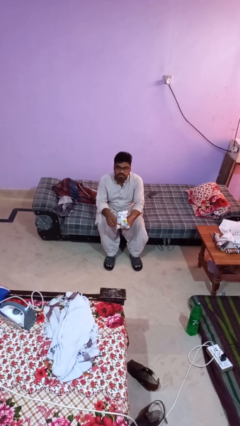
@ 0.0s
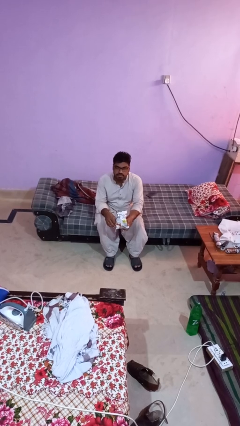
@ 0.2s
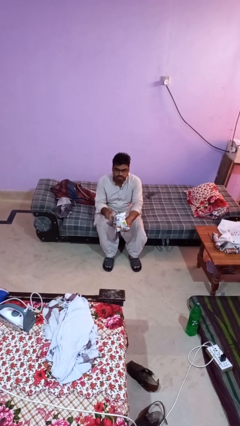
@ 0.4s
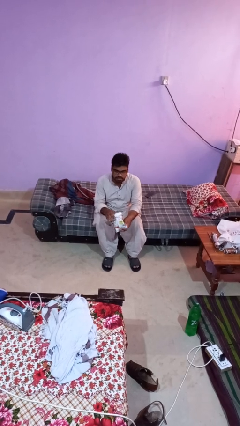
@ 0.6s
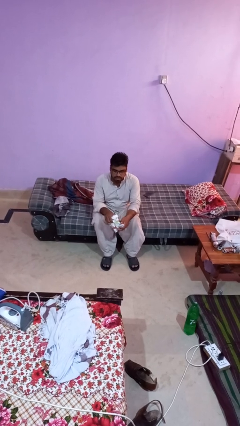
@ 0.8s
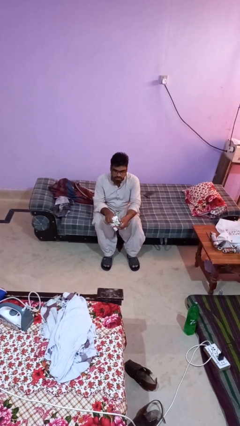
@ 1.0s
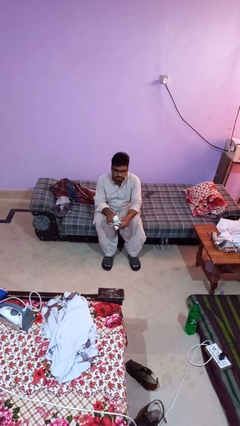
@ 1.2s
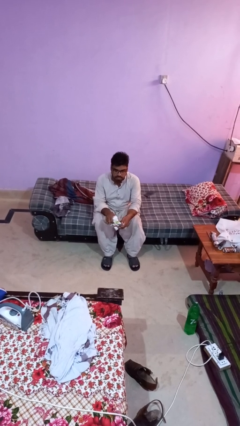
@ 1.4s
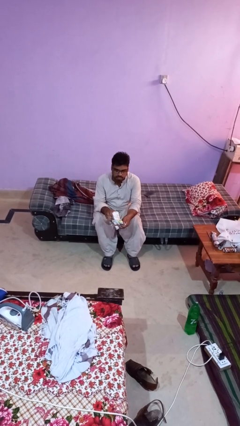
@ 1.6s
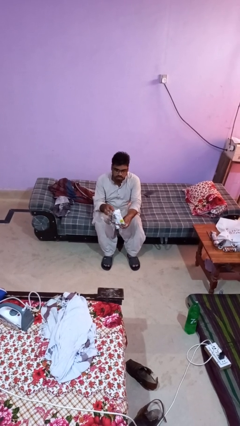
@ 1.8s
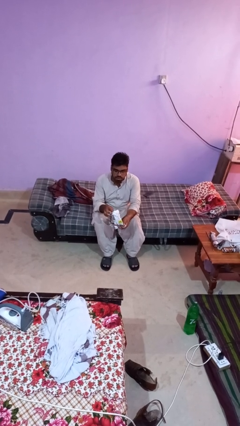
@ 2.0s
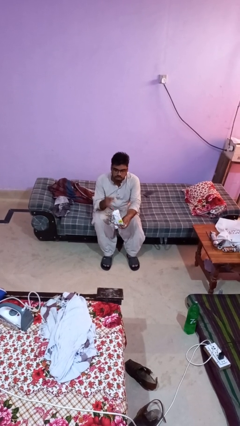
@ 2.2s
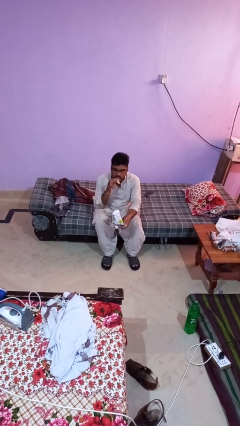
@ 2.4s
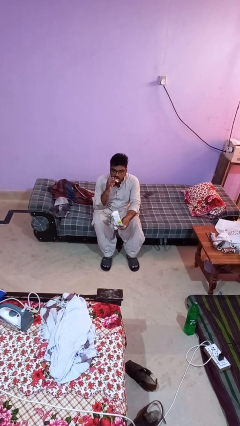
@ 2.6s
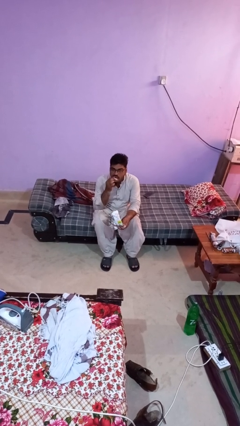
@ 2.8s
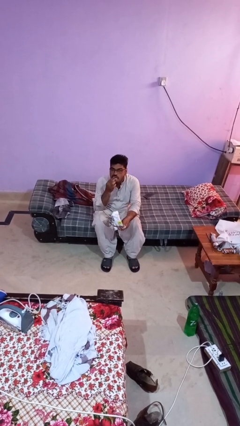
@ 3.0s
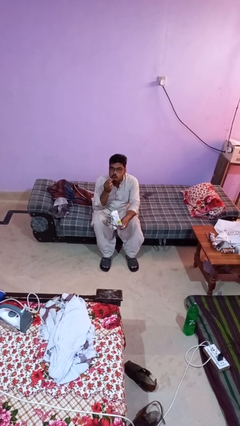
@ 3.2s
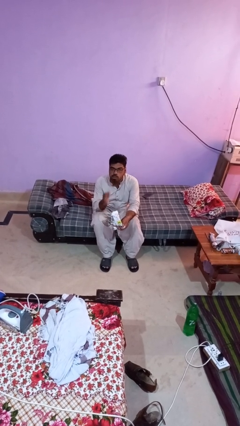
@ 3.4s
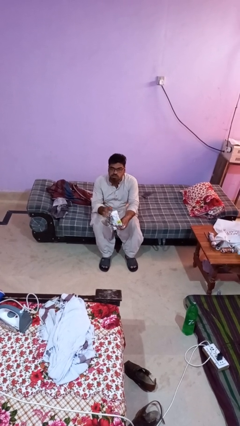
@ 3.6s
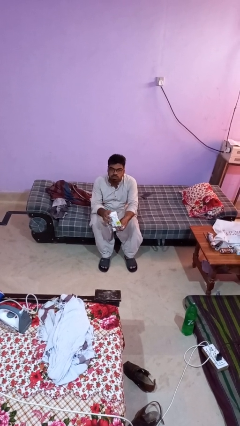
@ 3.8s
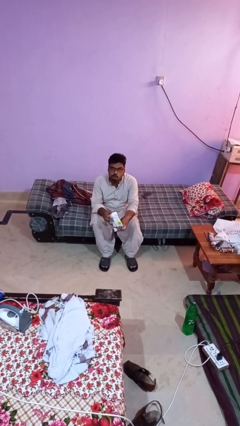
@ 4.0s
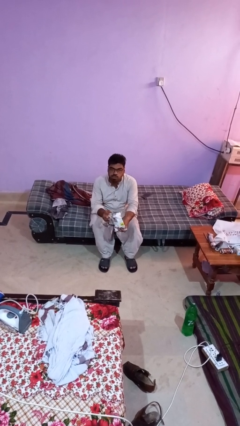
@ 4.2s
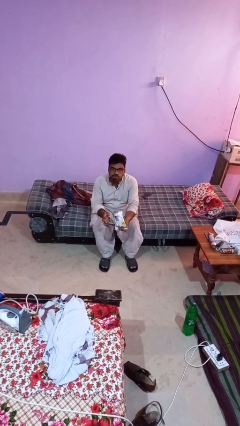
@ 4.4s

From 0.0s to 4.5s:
person eats snack from bag

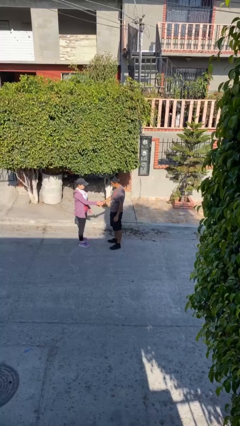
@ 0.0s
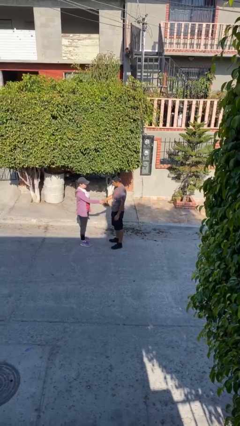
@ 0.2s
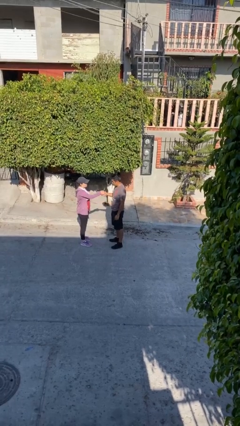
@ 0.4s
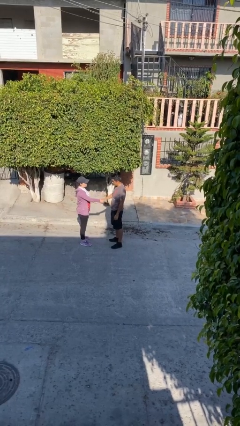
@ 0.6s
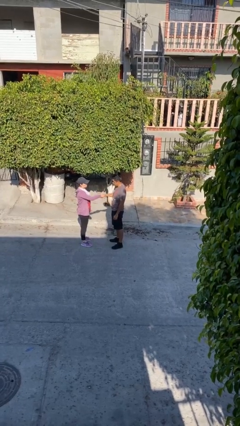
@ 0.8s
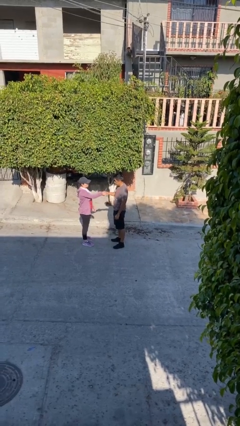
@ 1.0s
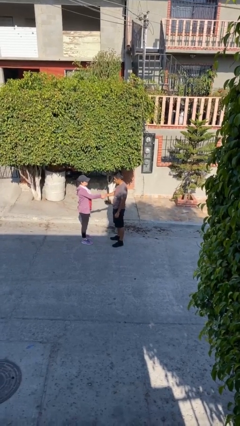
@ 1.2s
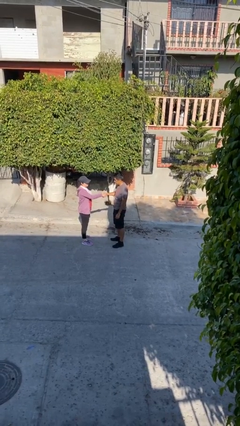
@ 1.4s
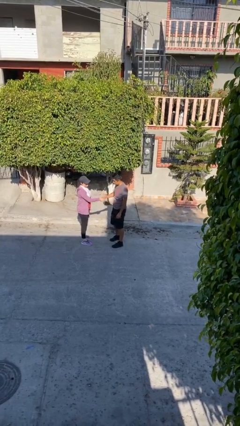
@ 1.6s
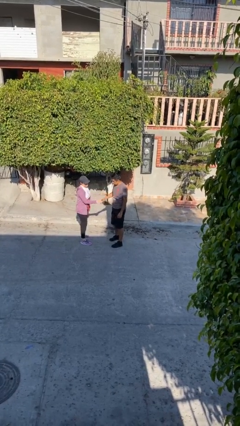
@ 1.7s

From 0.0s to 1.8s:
person shakes hand

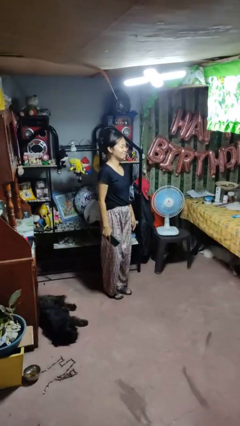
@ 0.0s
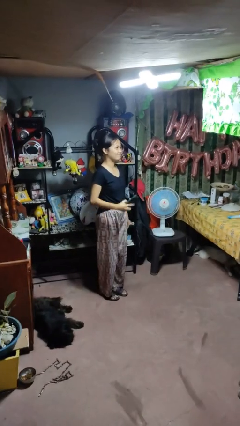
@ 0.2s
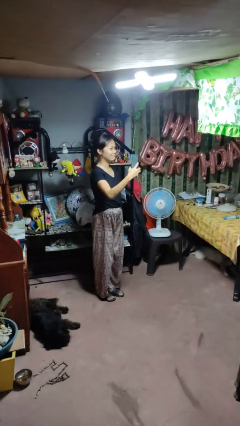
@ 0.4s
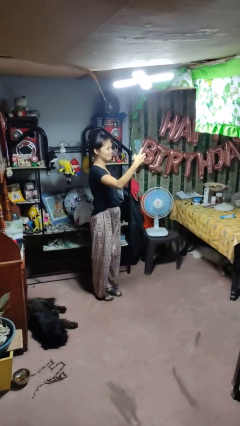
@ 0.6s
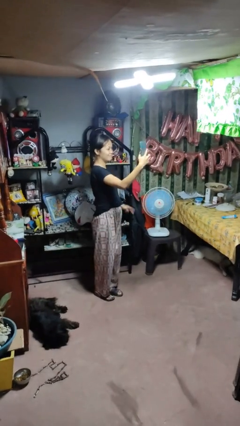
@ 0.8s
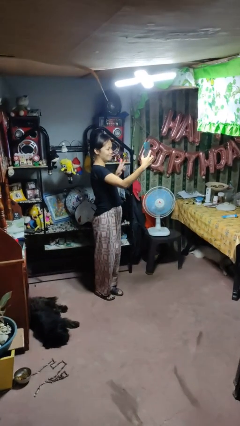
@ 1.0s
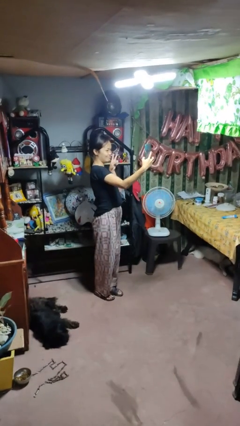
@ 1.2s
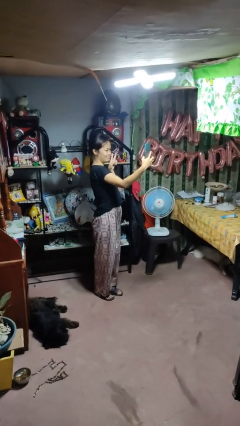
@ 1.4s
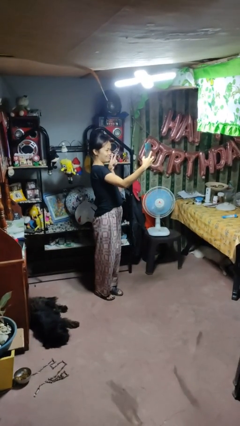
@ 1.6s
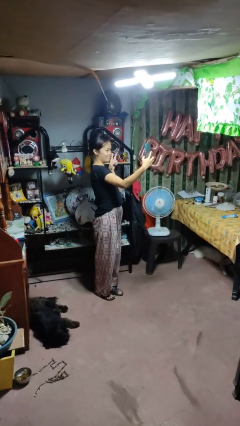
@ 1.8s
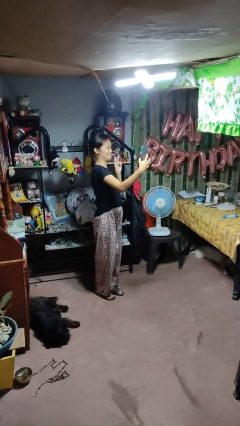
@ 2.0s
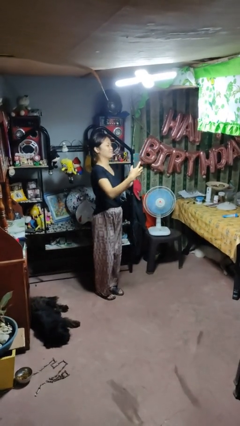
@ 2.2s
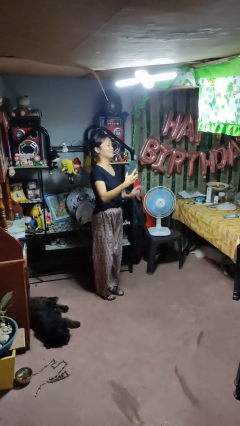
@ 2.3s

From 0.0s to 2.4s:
person takes selfie

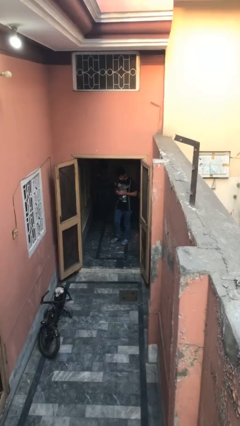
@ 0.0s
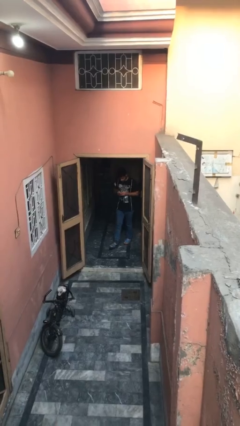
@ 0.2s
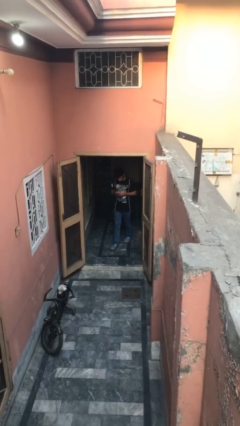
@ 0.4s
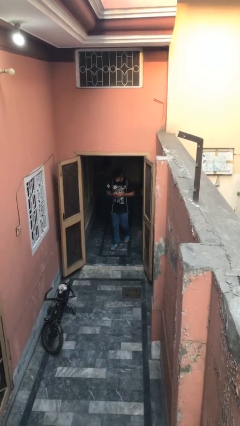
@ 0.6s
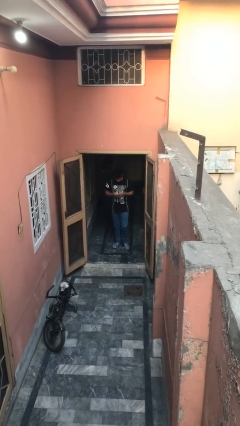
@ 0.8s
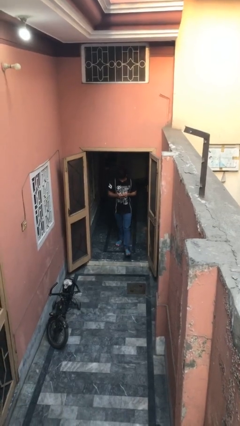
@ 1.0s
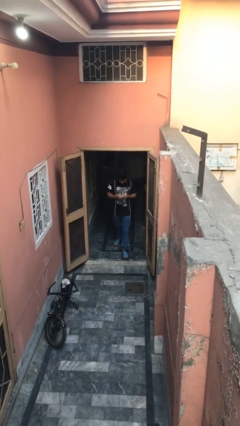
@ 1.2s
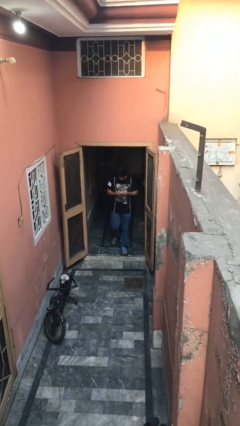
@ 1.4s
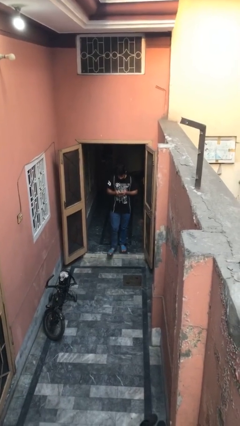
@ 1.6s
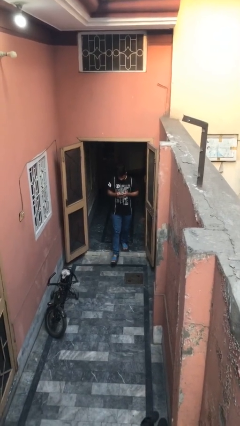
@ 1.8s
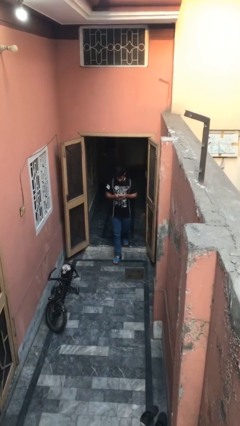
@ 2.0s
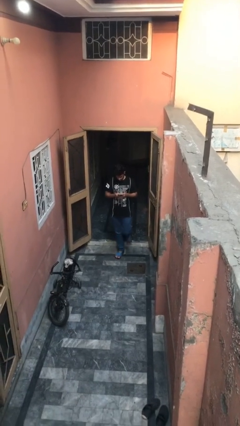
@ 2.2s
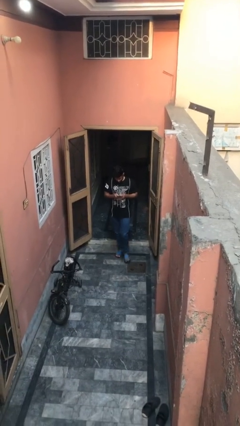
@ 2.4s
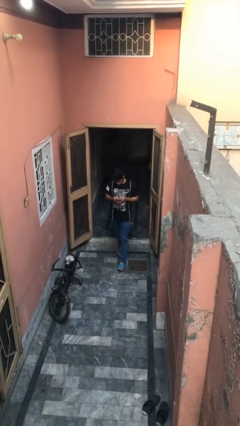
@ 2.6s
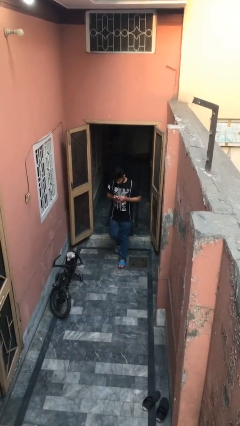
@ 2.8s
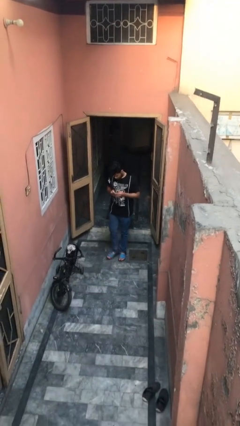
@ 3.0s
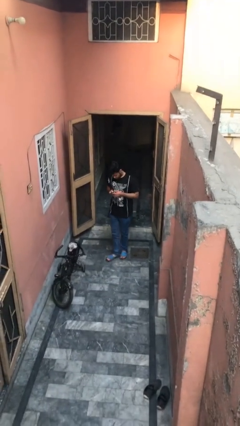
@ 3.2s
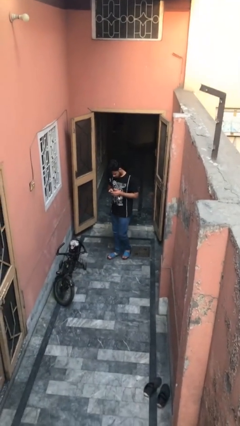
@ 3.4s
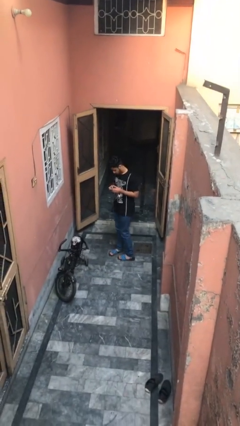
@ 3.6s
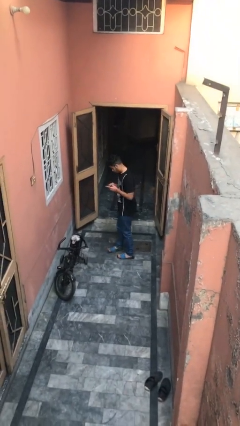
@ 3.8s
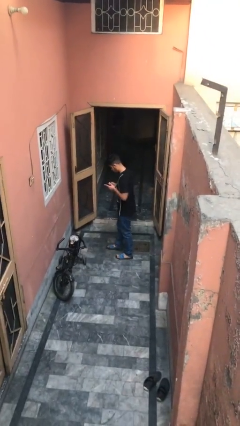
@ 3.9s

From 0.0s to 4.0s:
person enters scene through structure

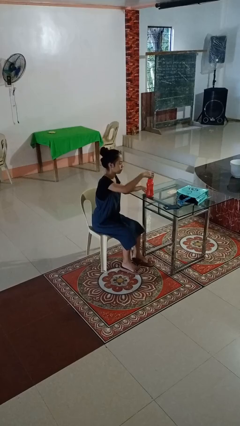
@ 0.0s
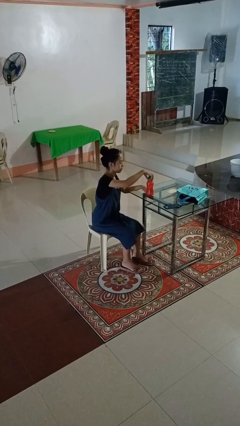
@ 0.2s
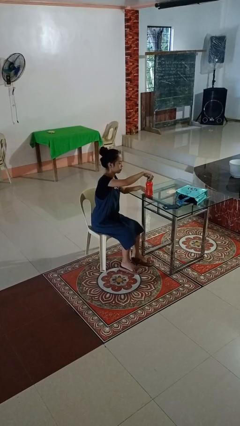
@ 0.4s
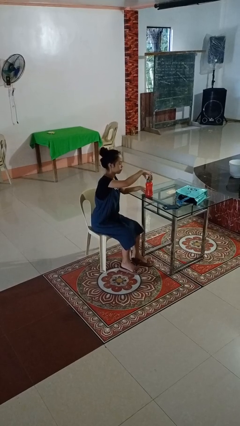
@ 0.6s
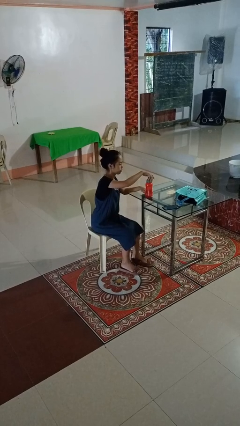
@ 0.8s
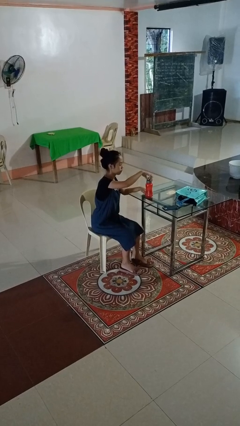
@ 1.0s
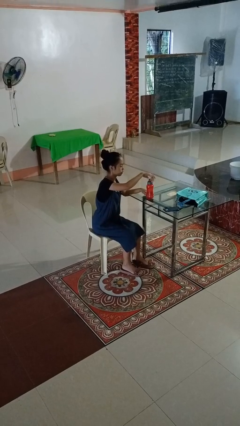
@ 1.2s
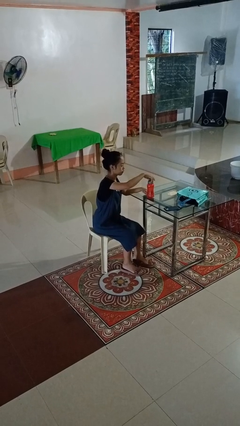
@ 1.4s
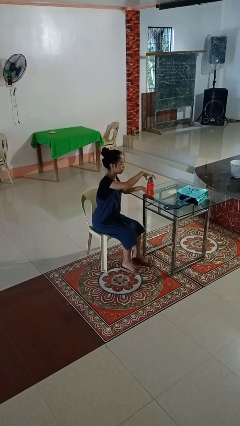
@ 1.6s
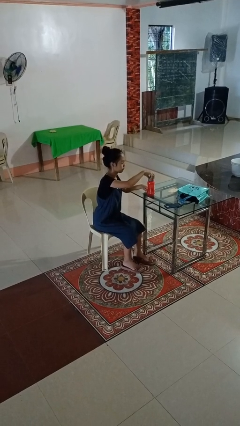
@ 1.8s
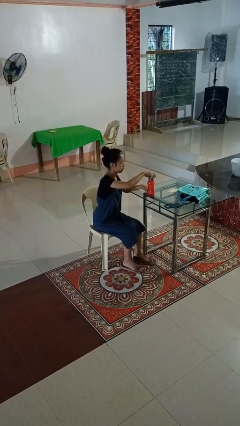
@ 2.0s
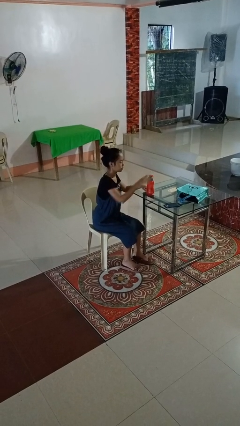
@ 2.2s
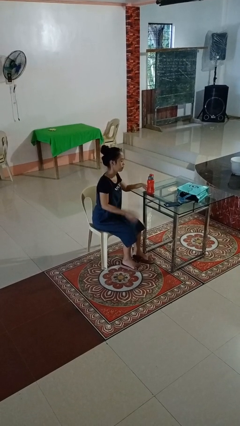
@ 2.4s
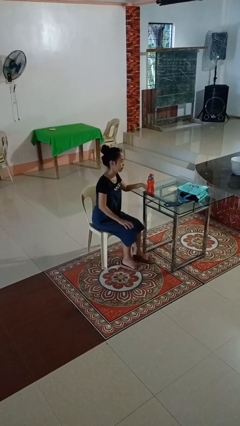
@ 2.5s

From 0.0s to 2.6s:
person screws lid to bottle

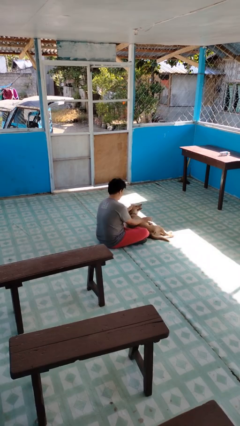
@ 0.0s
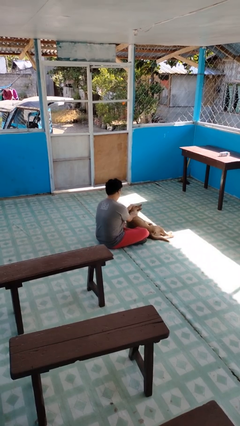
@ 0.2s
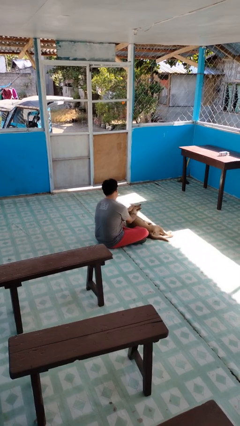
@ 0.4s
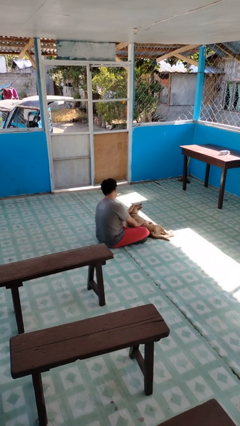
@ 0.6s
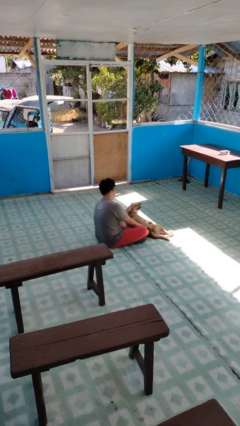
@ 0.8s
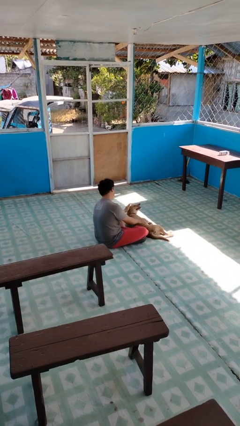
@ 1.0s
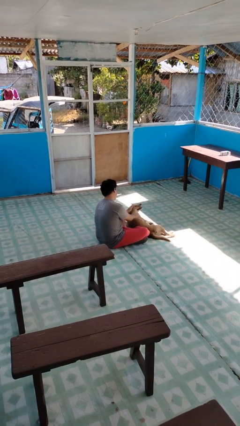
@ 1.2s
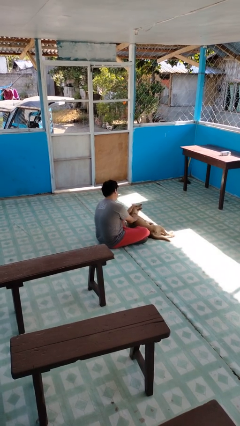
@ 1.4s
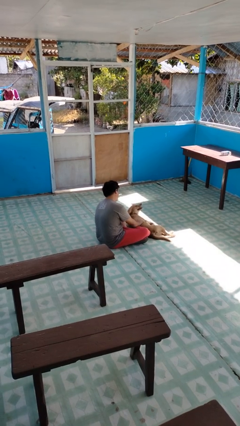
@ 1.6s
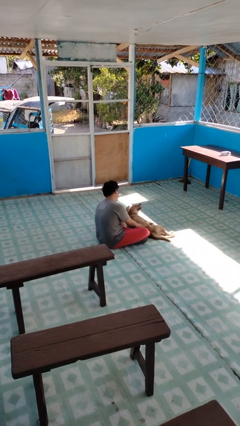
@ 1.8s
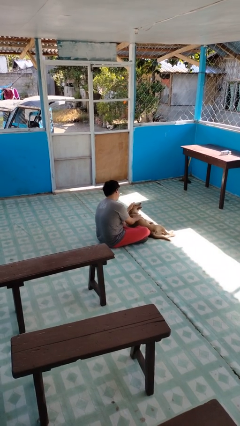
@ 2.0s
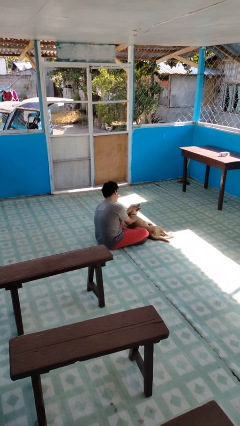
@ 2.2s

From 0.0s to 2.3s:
person pets dog

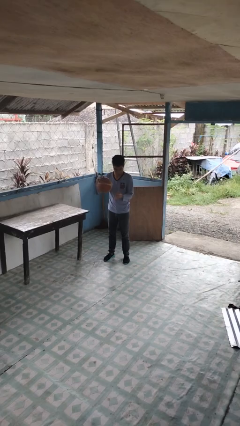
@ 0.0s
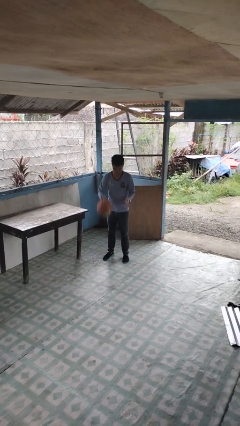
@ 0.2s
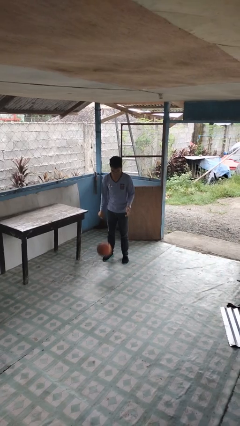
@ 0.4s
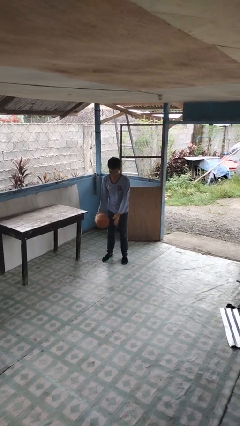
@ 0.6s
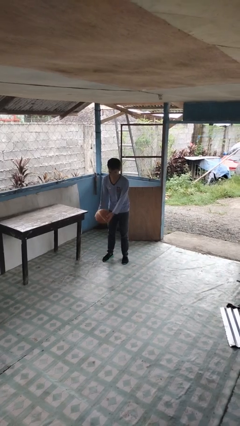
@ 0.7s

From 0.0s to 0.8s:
person bounces ball on floor
